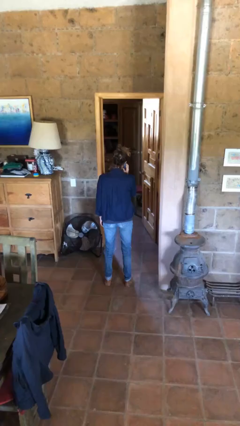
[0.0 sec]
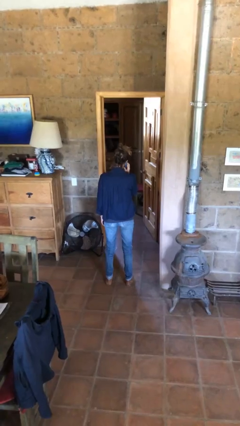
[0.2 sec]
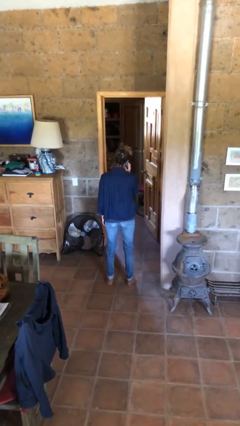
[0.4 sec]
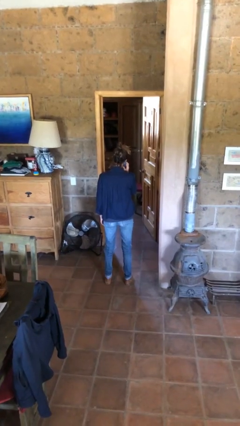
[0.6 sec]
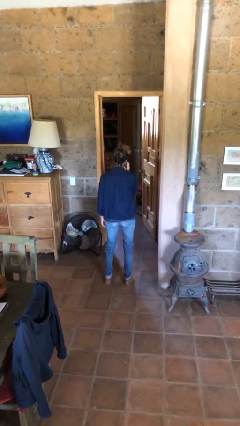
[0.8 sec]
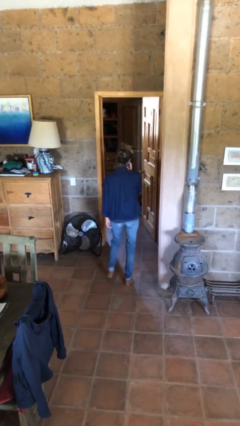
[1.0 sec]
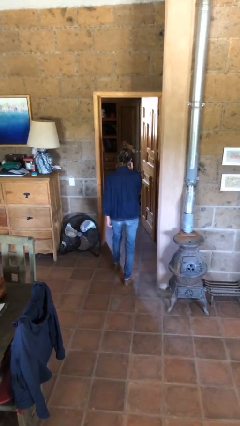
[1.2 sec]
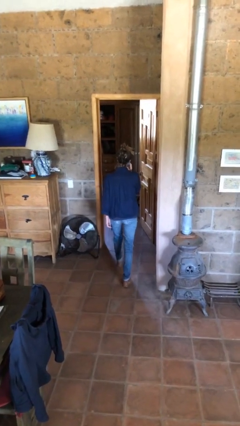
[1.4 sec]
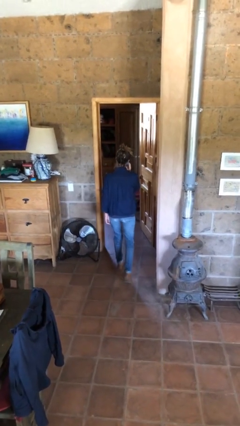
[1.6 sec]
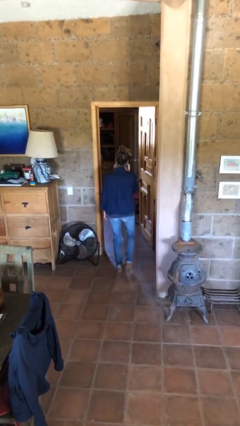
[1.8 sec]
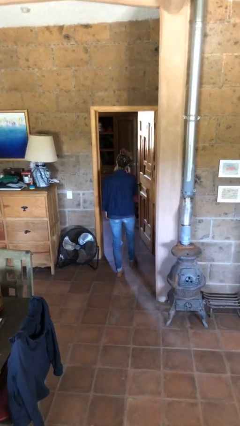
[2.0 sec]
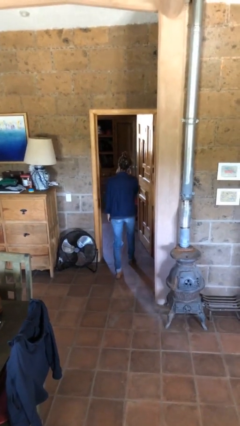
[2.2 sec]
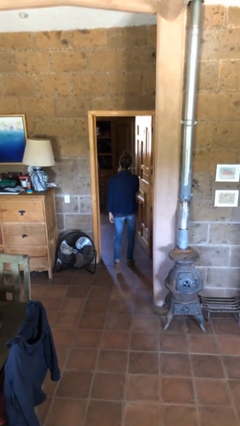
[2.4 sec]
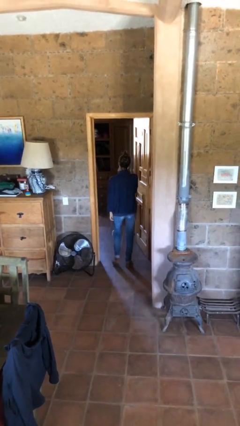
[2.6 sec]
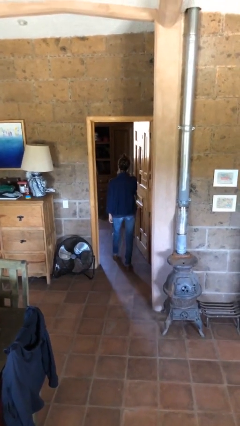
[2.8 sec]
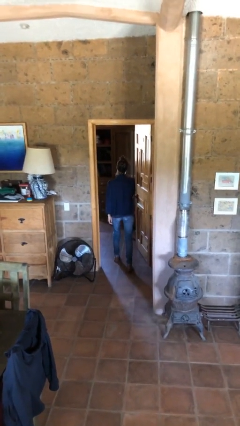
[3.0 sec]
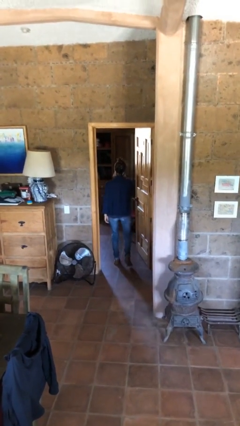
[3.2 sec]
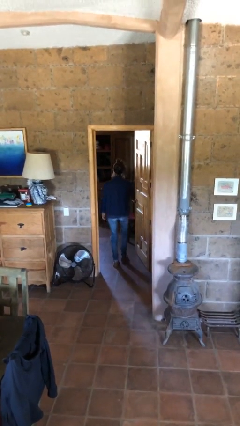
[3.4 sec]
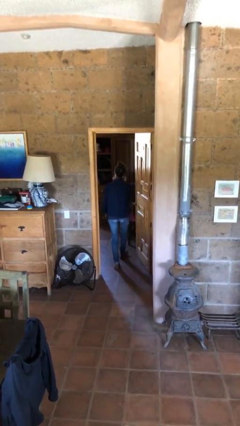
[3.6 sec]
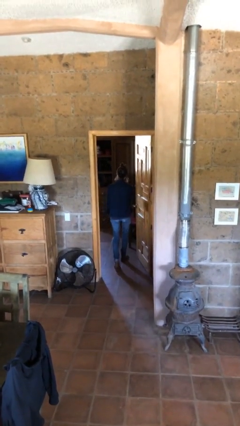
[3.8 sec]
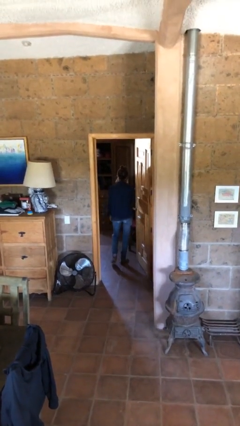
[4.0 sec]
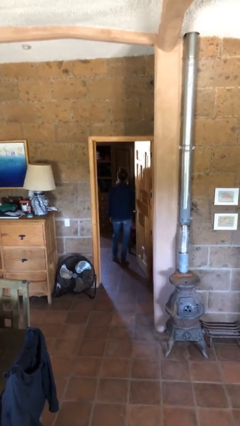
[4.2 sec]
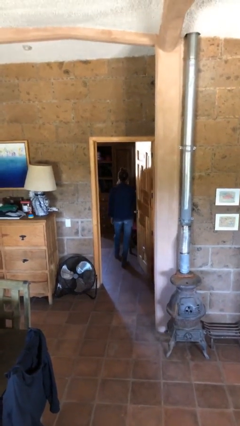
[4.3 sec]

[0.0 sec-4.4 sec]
person exits scene through structure

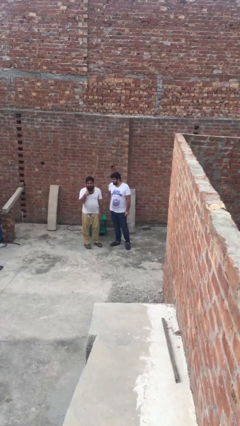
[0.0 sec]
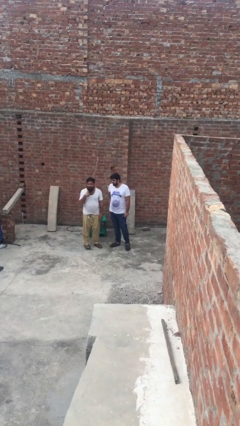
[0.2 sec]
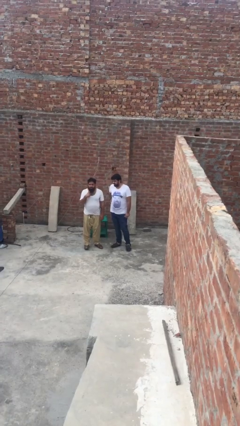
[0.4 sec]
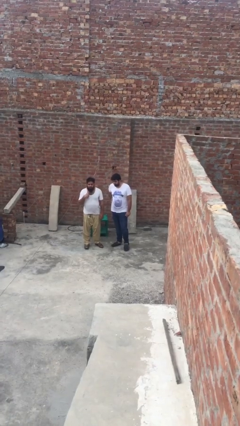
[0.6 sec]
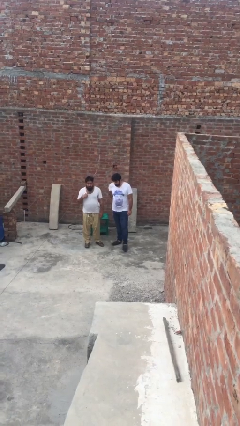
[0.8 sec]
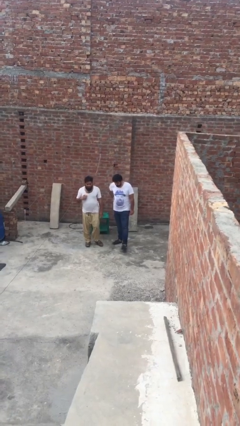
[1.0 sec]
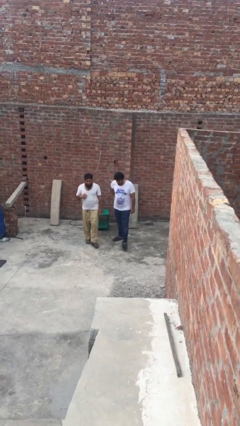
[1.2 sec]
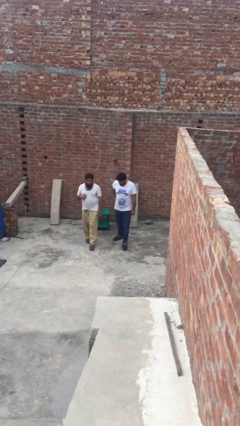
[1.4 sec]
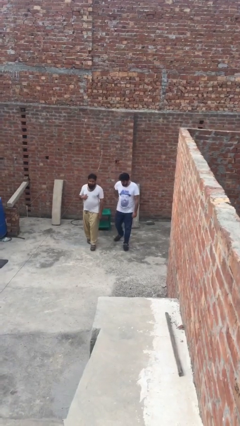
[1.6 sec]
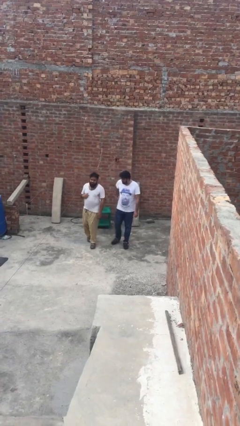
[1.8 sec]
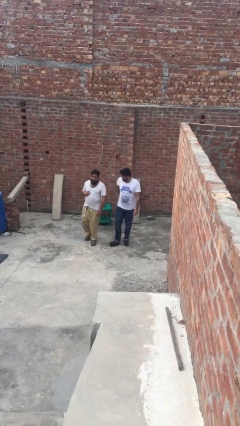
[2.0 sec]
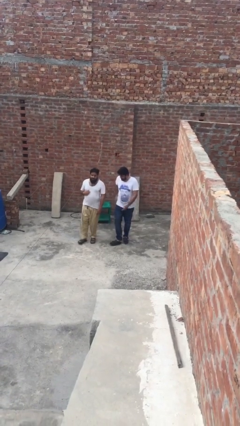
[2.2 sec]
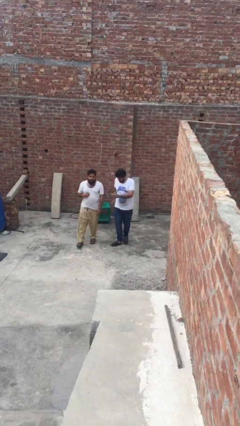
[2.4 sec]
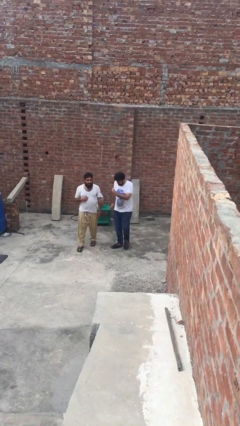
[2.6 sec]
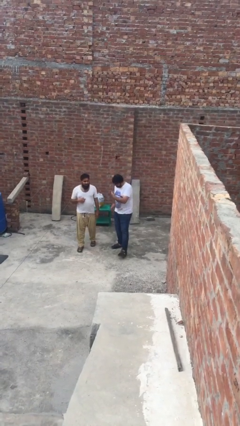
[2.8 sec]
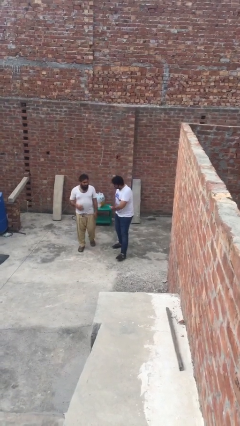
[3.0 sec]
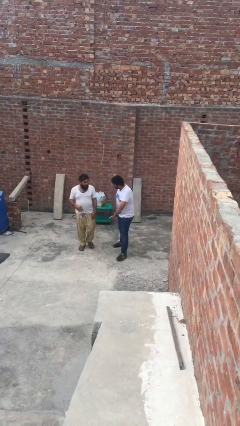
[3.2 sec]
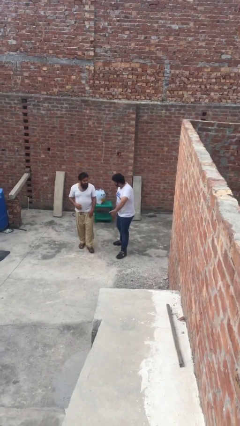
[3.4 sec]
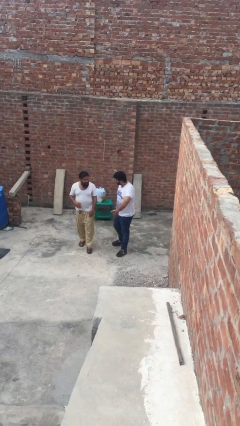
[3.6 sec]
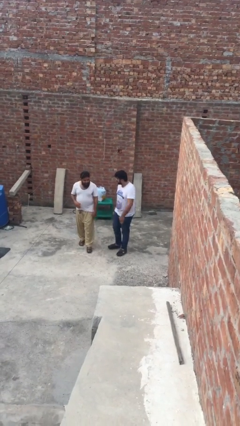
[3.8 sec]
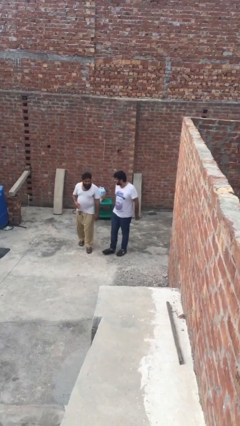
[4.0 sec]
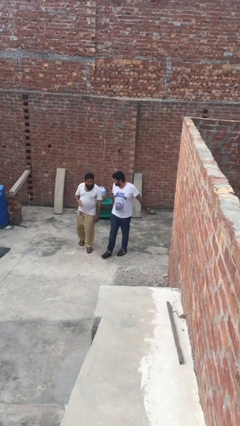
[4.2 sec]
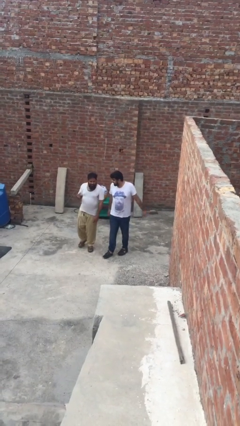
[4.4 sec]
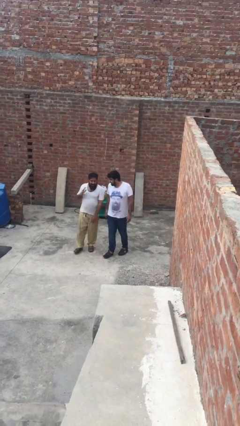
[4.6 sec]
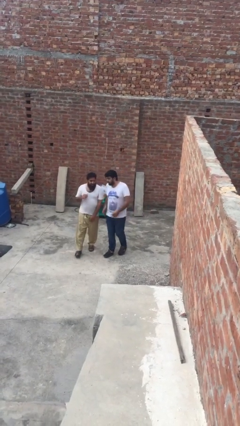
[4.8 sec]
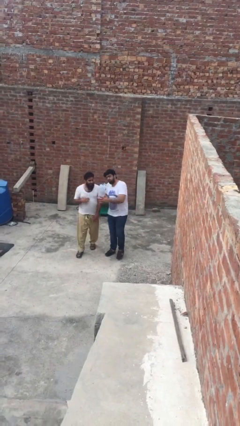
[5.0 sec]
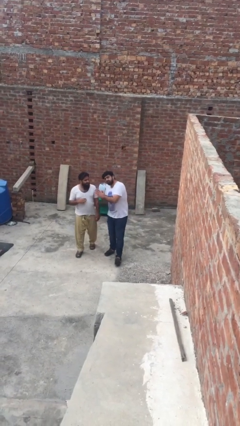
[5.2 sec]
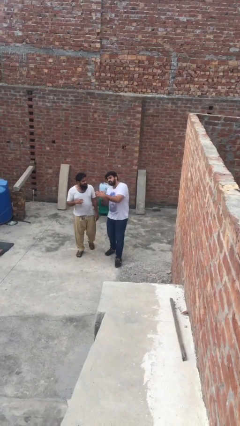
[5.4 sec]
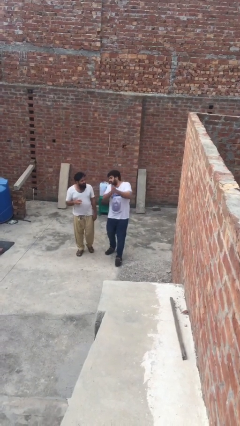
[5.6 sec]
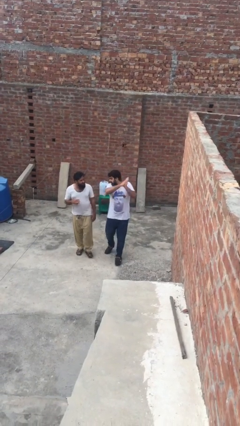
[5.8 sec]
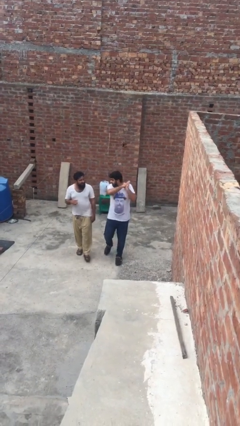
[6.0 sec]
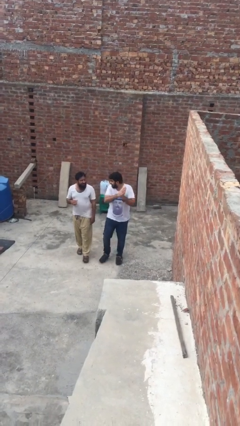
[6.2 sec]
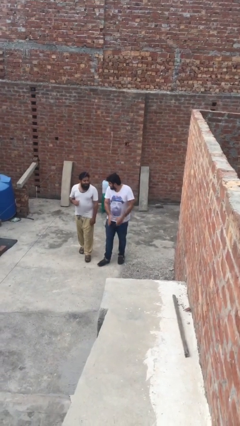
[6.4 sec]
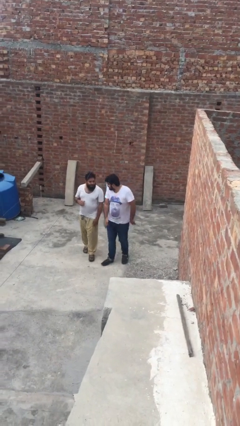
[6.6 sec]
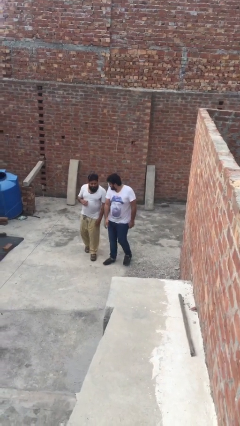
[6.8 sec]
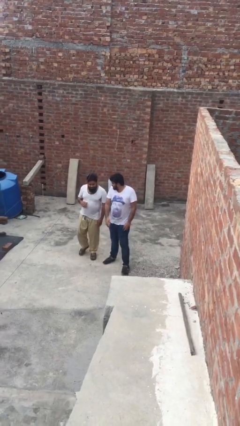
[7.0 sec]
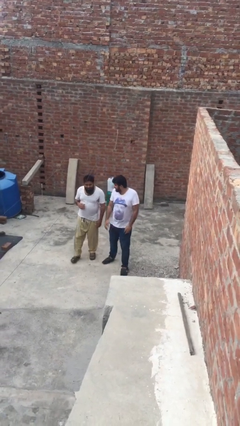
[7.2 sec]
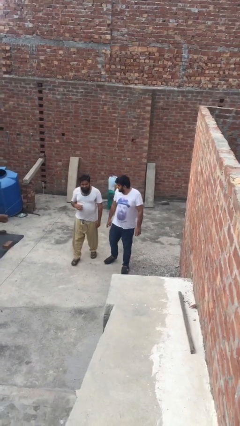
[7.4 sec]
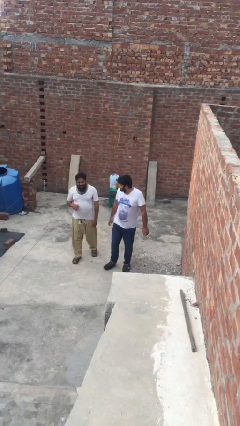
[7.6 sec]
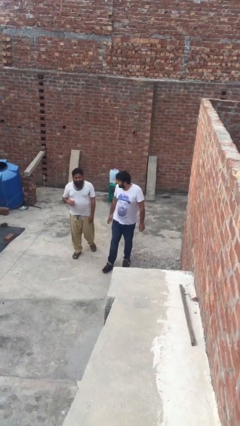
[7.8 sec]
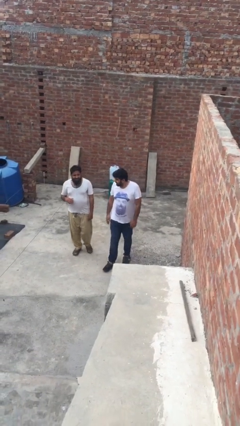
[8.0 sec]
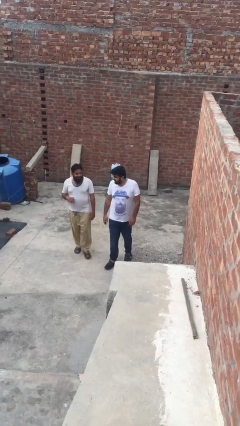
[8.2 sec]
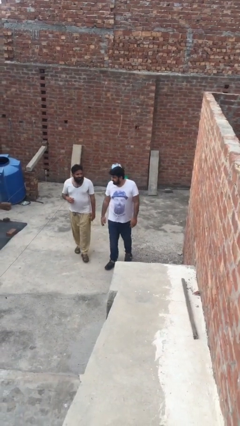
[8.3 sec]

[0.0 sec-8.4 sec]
person talks to person

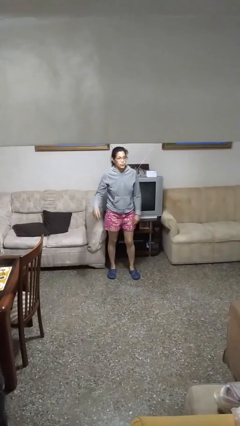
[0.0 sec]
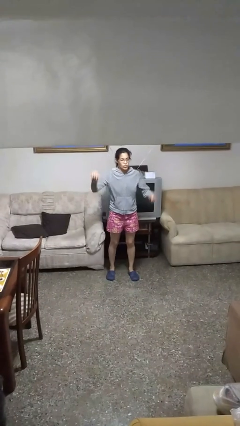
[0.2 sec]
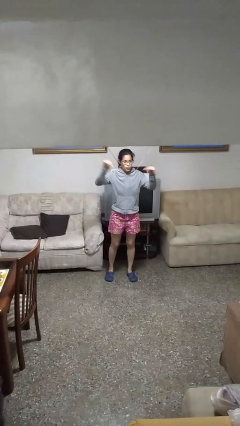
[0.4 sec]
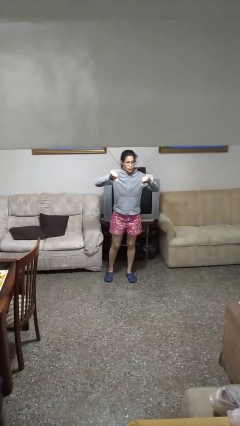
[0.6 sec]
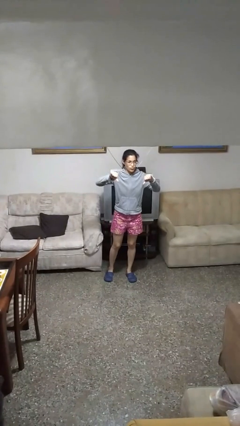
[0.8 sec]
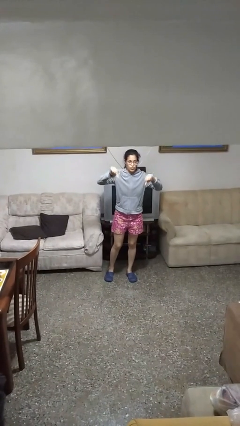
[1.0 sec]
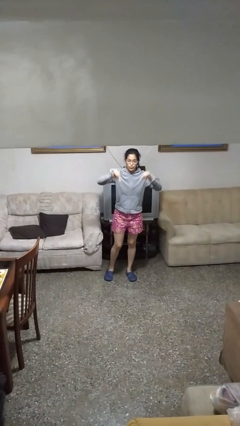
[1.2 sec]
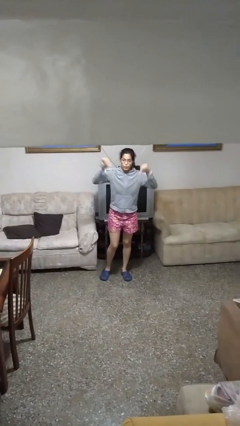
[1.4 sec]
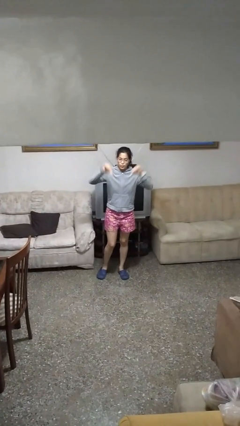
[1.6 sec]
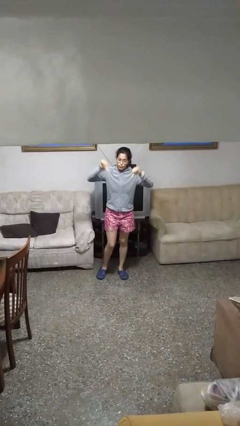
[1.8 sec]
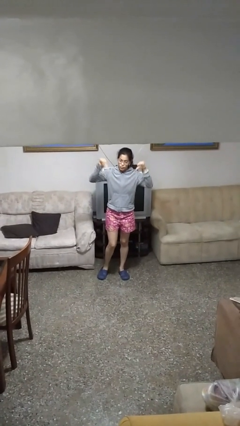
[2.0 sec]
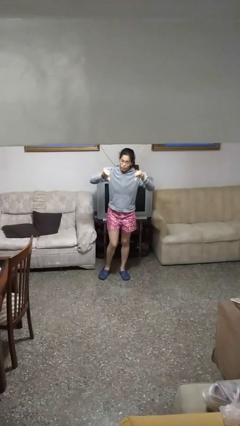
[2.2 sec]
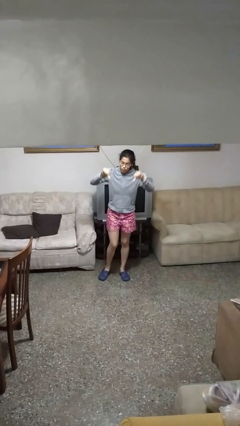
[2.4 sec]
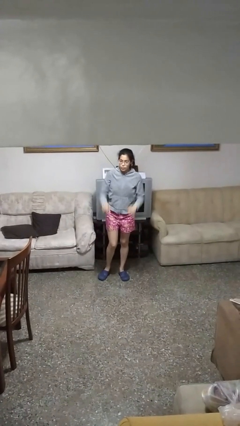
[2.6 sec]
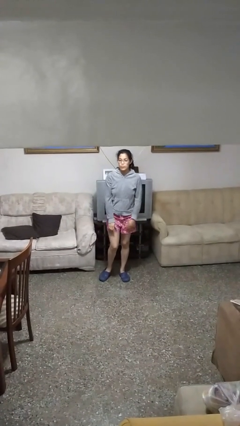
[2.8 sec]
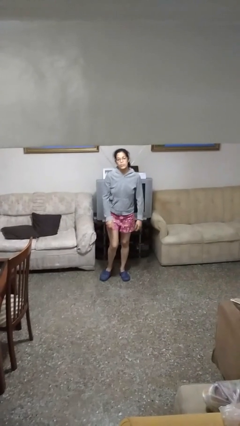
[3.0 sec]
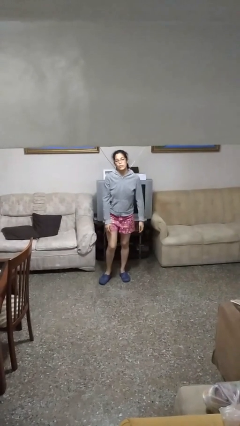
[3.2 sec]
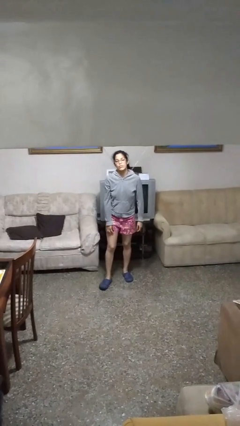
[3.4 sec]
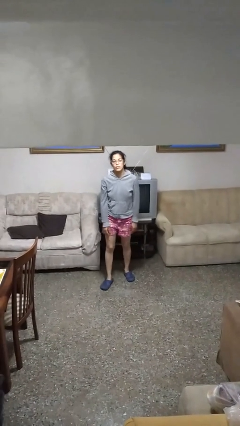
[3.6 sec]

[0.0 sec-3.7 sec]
person gestures thumbs down

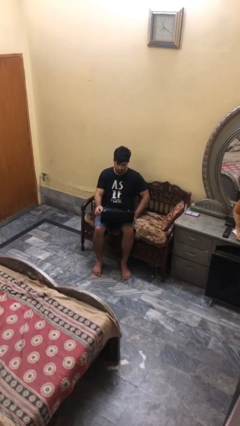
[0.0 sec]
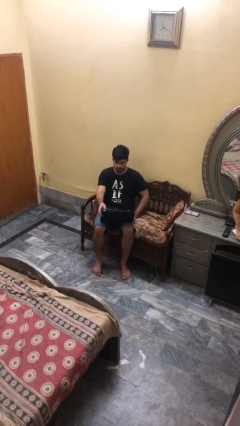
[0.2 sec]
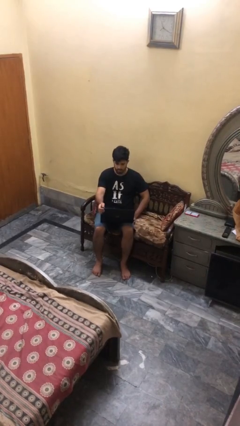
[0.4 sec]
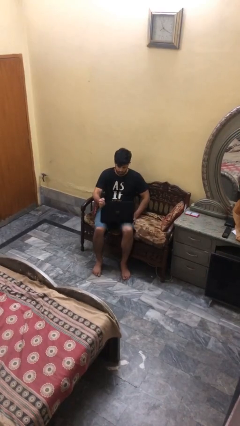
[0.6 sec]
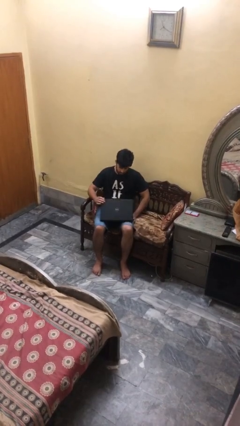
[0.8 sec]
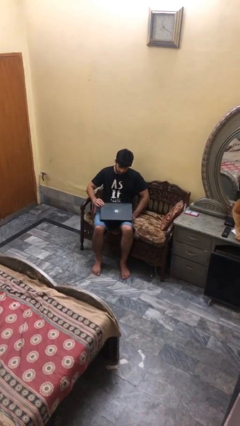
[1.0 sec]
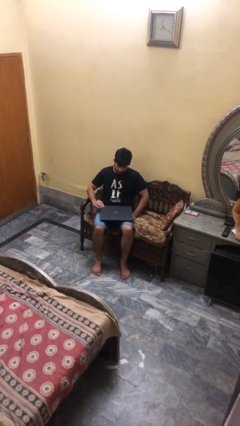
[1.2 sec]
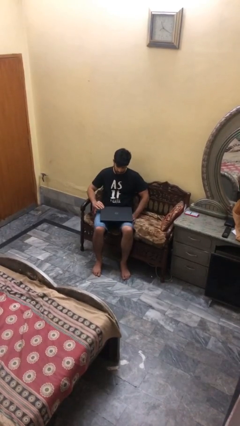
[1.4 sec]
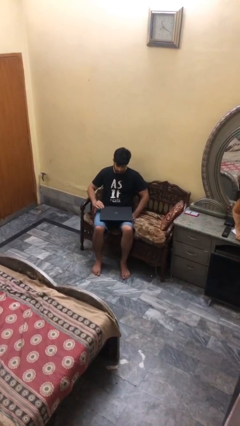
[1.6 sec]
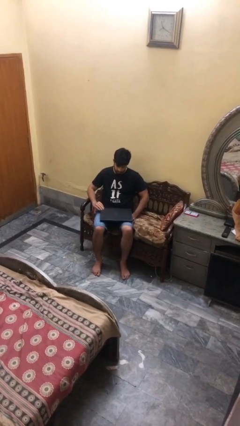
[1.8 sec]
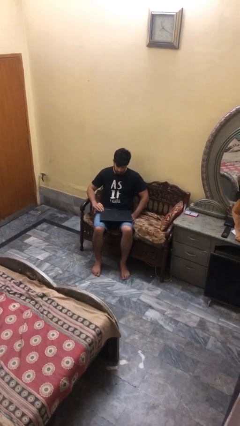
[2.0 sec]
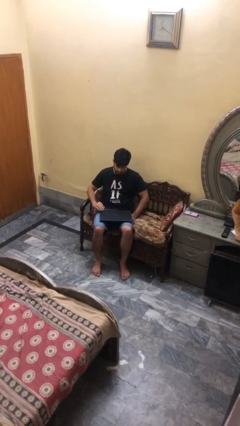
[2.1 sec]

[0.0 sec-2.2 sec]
person closes laptop
